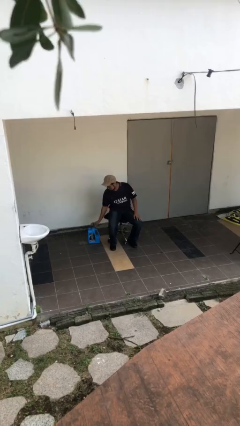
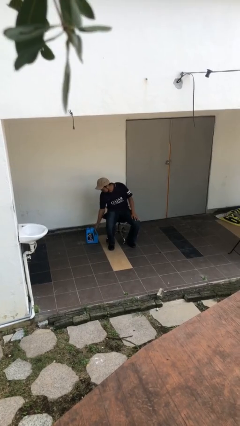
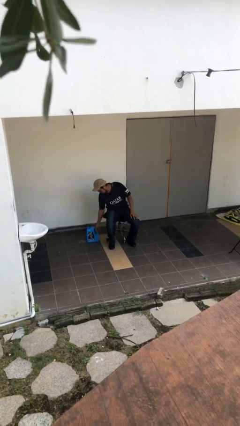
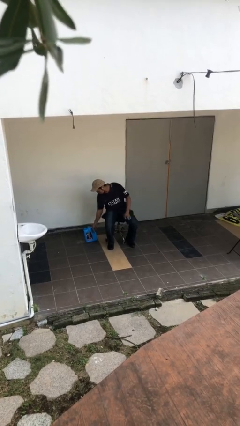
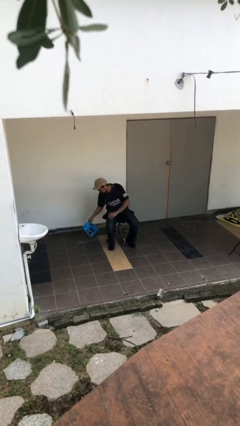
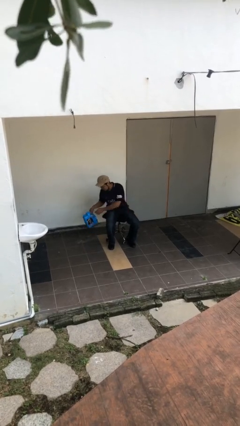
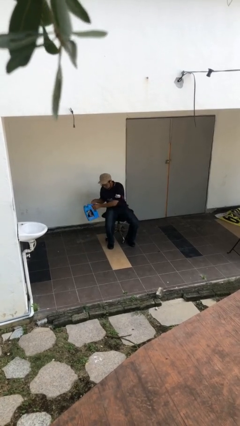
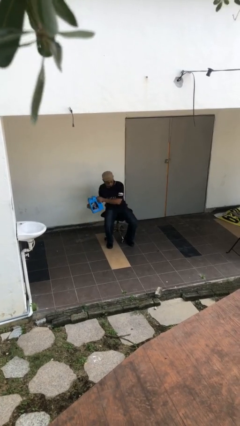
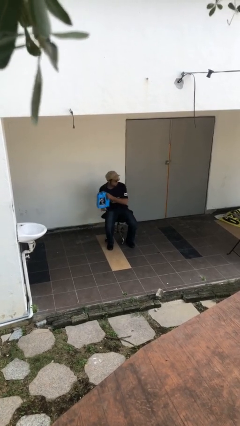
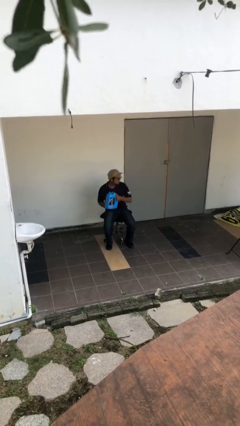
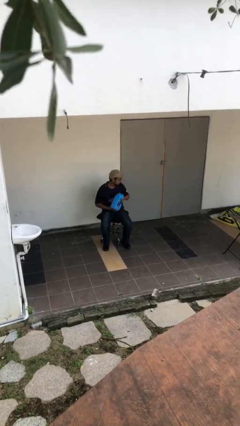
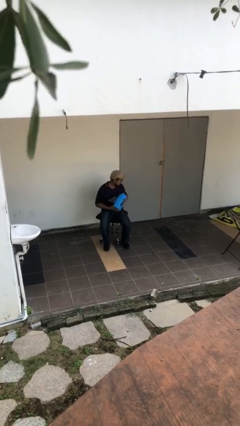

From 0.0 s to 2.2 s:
person picks up object from floor

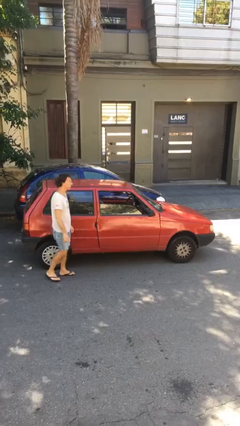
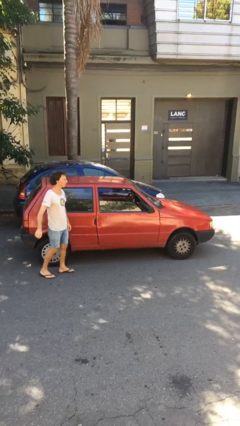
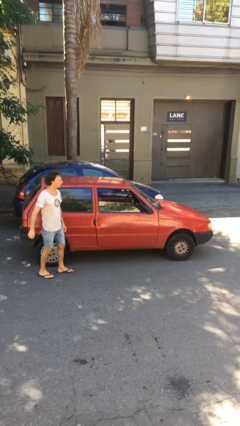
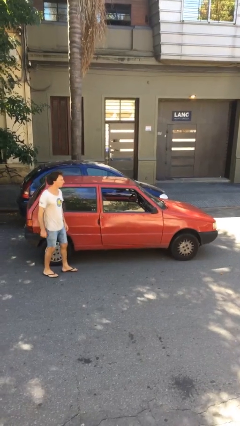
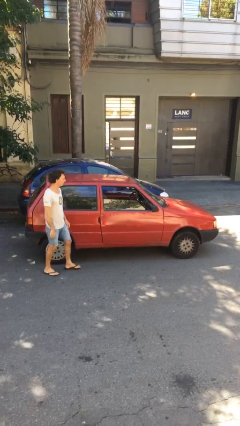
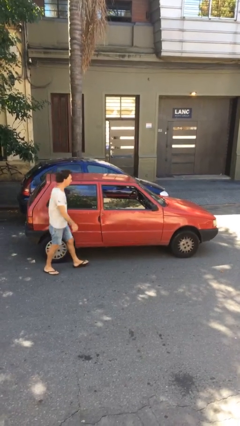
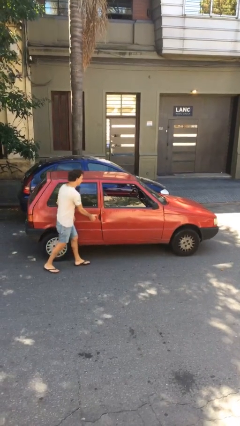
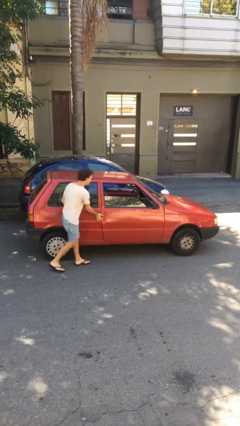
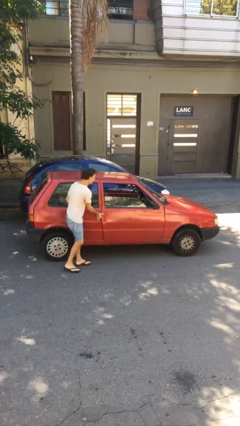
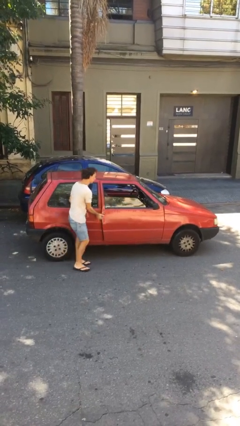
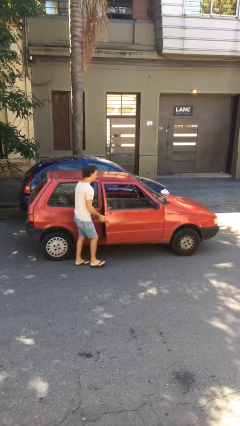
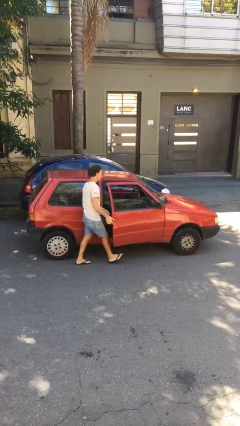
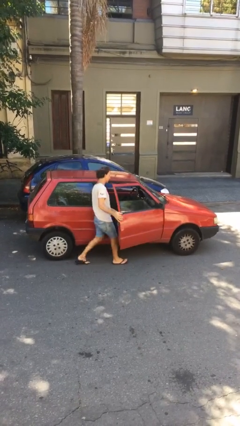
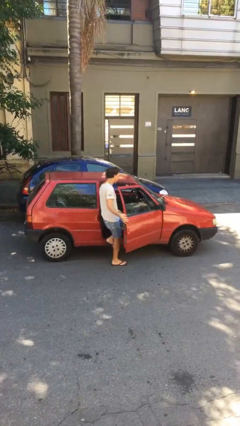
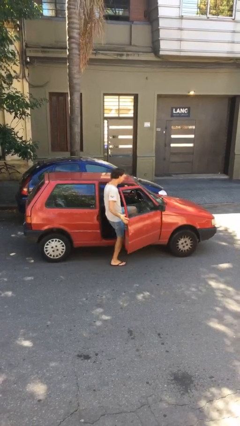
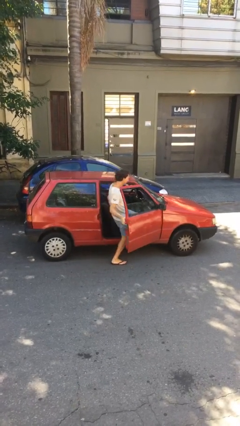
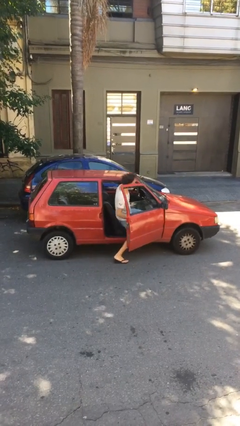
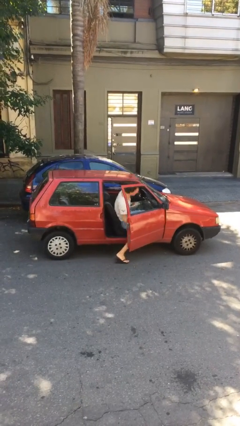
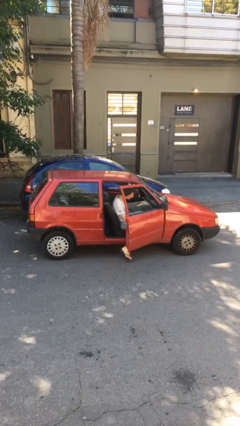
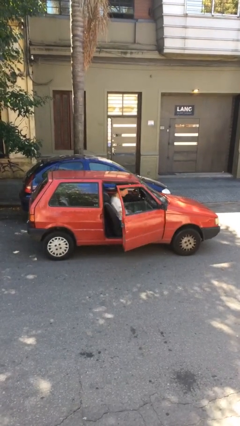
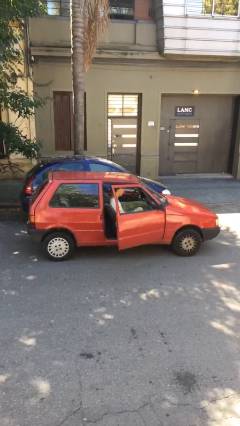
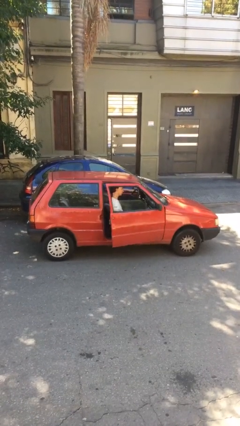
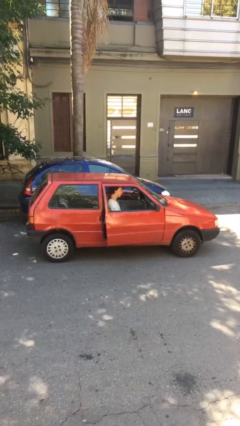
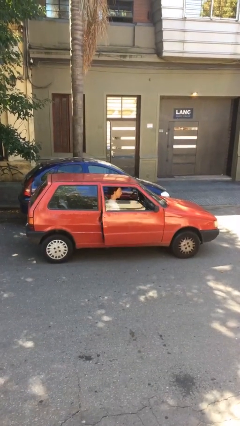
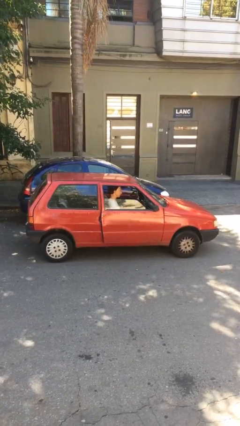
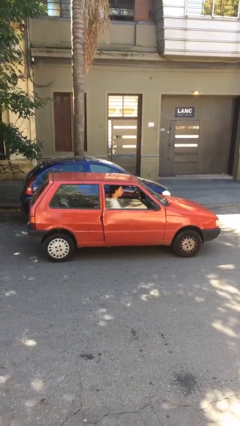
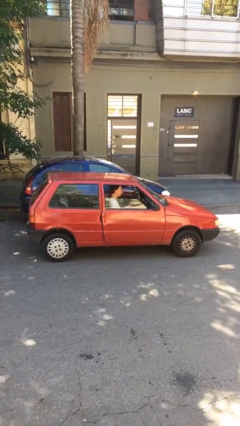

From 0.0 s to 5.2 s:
car picks up person

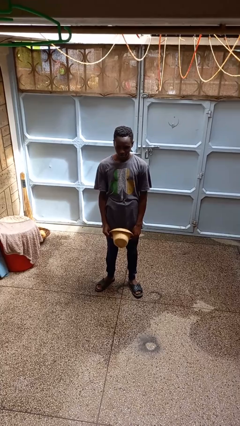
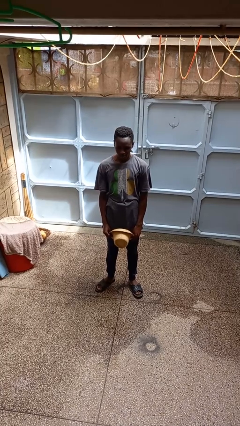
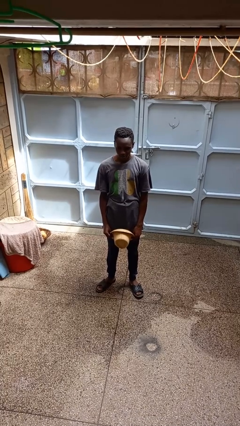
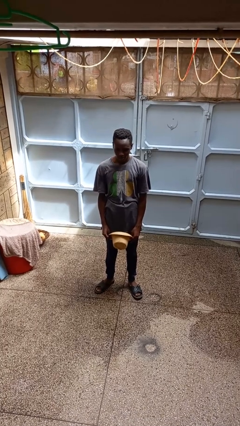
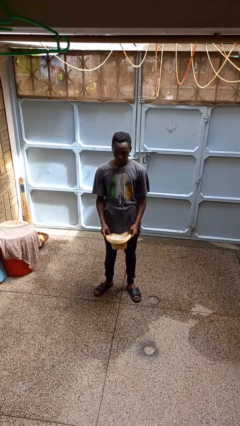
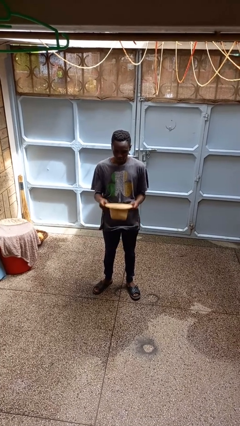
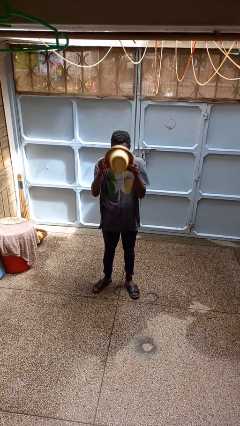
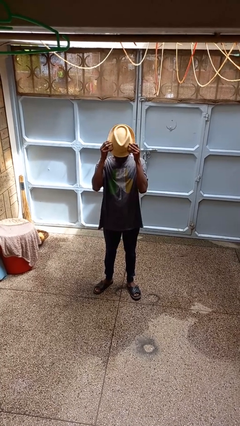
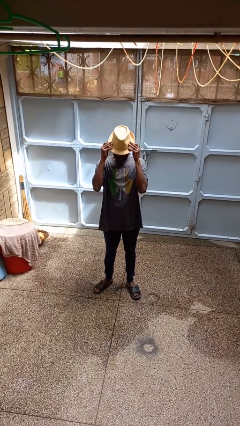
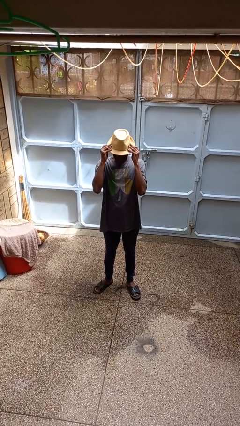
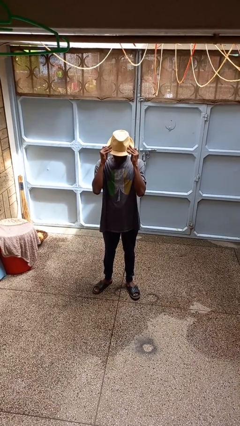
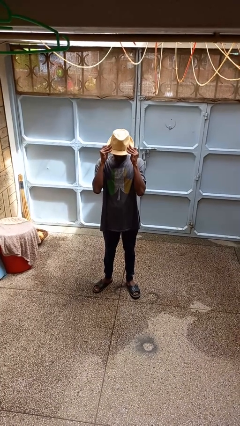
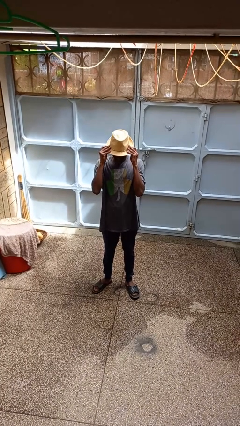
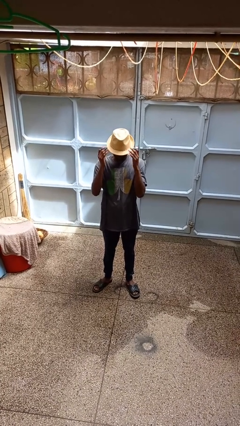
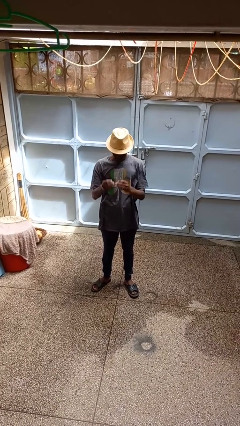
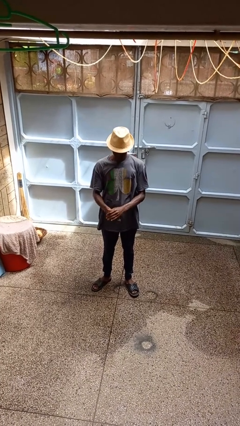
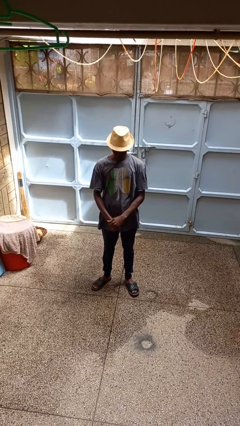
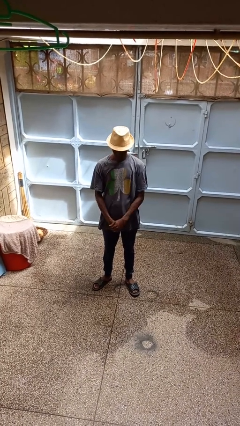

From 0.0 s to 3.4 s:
person puts on hat

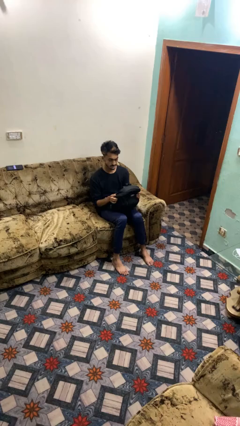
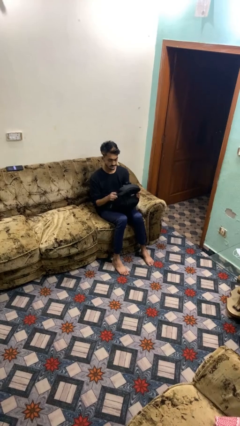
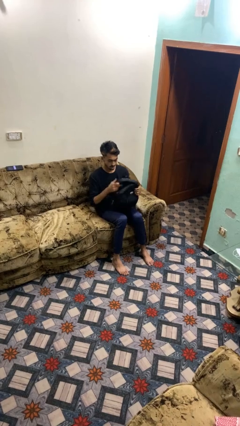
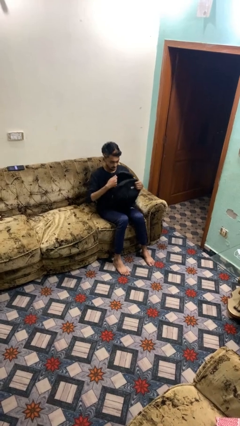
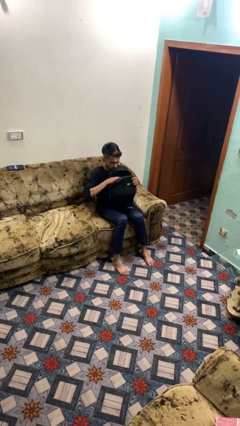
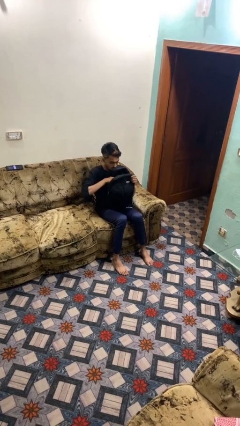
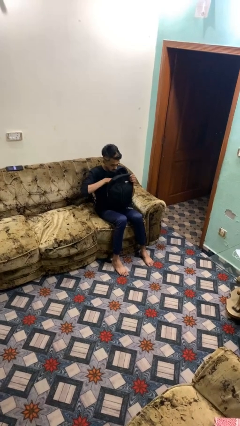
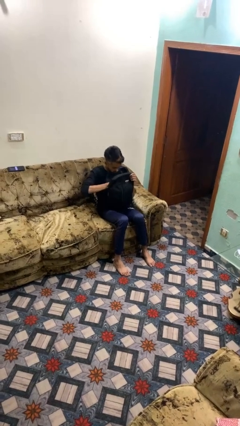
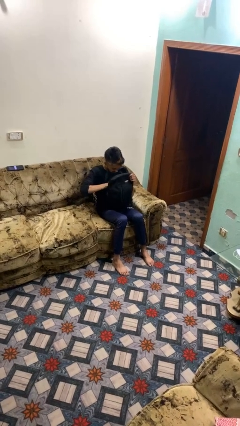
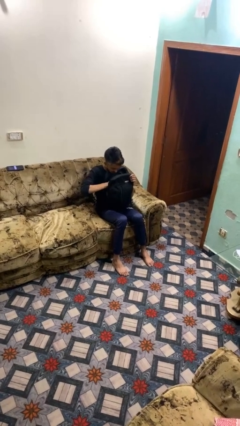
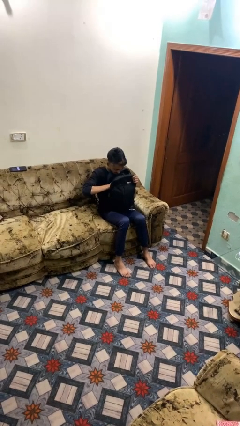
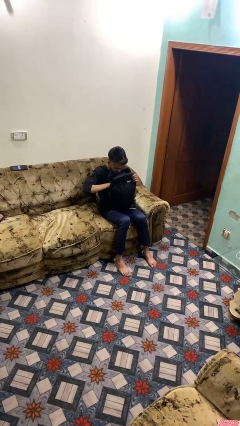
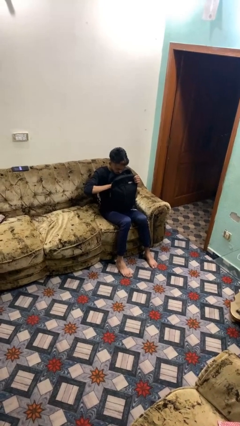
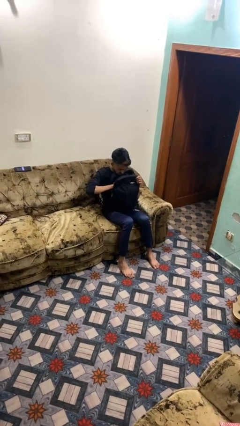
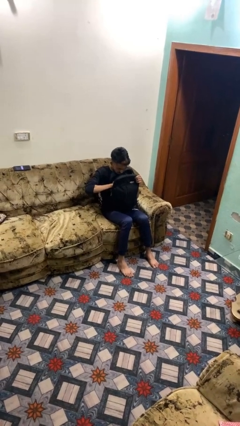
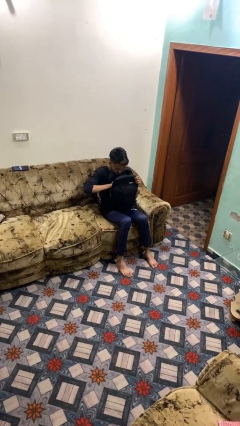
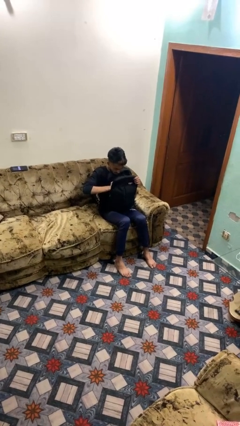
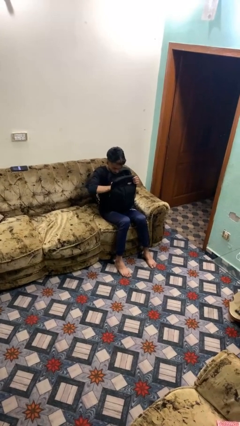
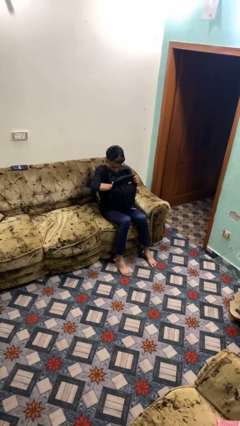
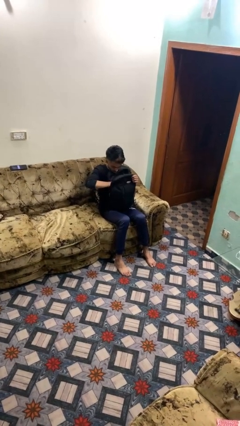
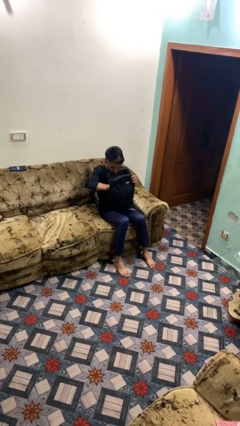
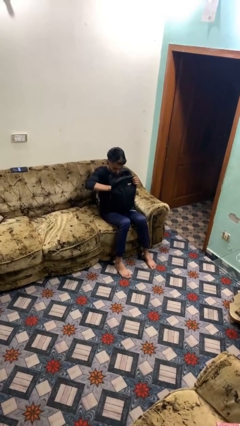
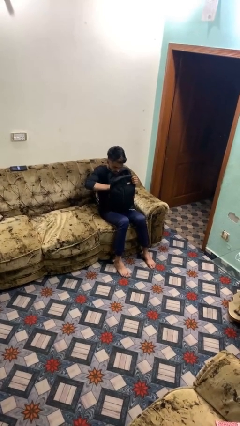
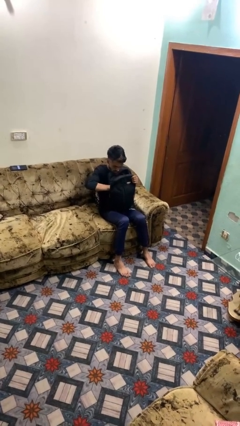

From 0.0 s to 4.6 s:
person searches in backpack

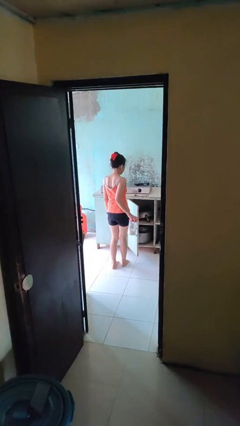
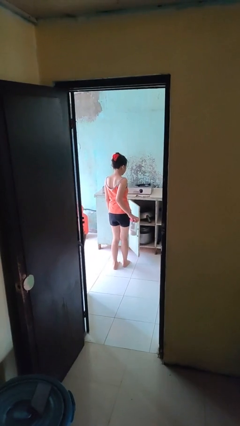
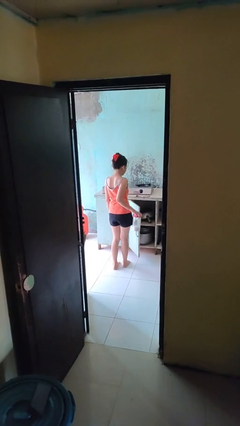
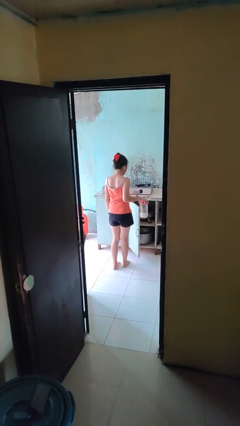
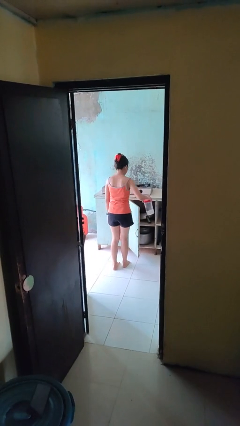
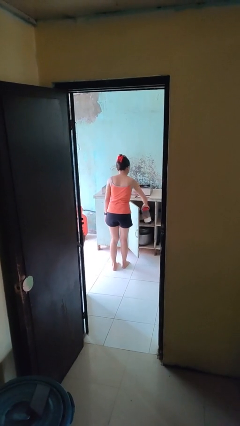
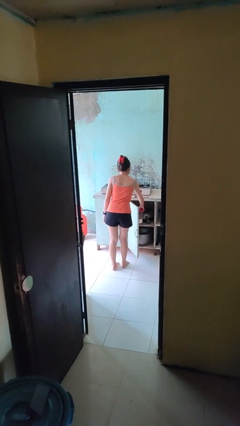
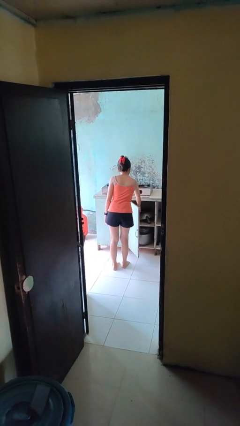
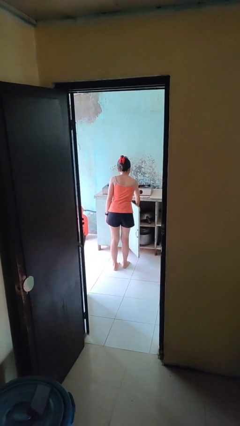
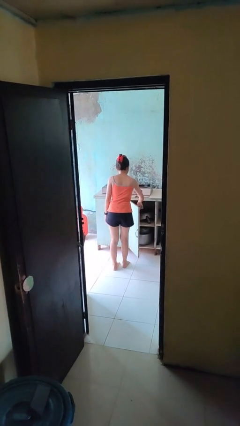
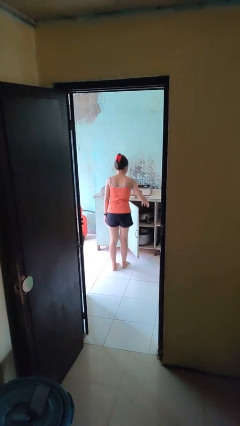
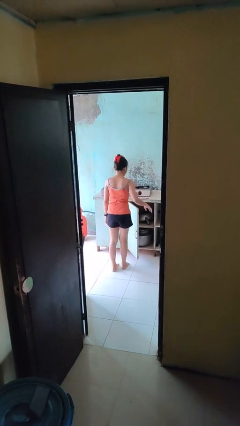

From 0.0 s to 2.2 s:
person puts down object into cabinet
